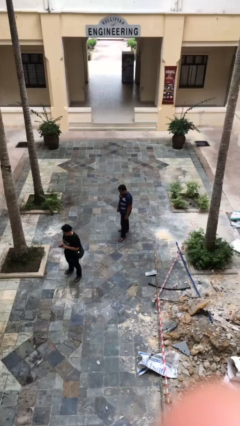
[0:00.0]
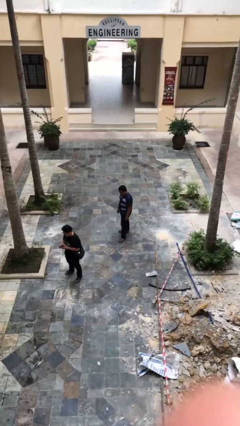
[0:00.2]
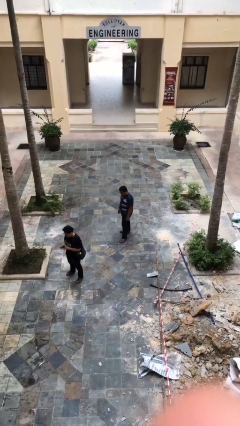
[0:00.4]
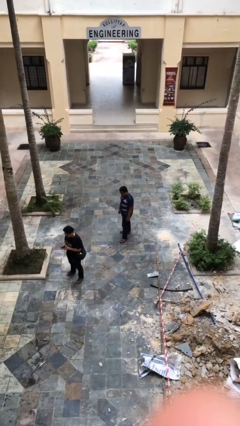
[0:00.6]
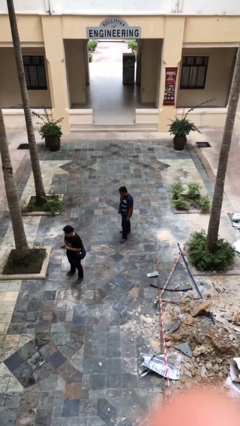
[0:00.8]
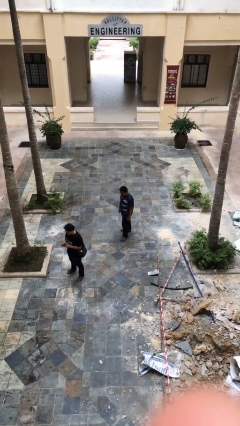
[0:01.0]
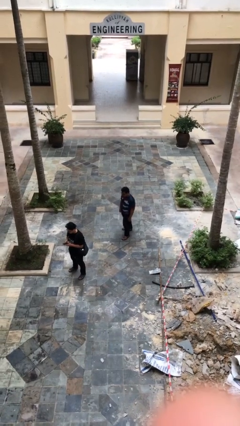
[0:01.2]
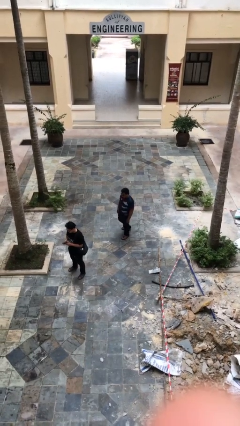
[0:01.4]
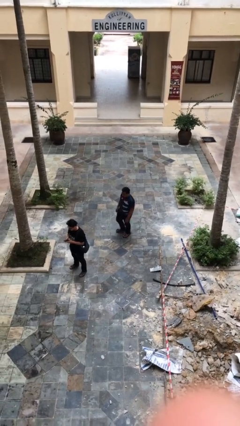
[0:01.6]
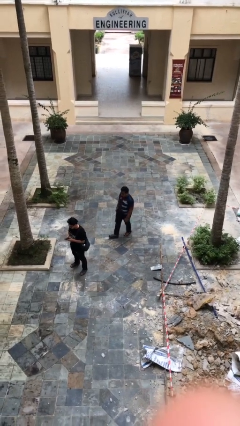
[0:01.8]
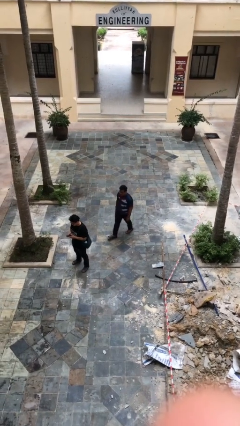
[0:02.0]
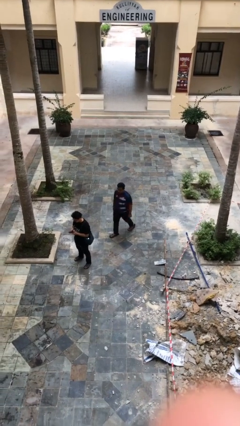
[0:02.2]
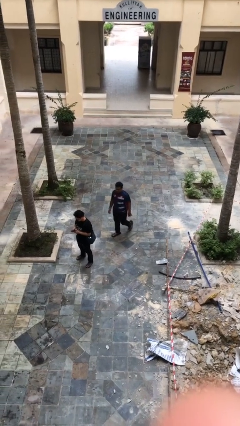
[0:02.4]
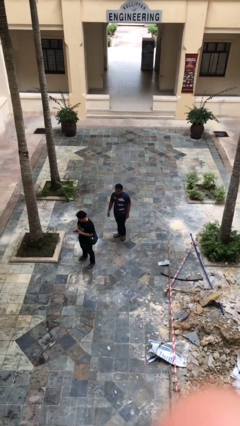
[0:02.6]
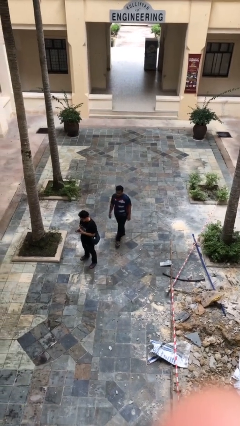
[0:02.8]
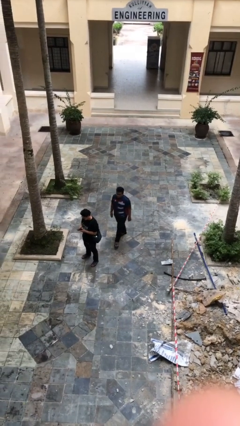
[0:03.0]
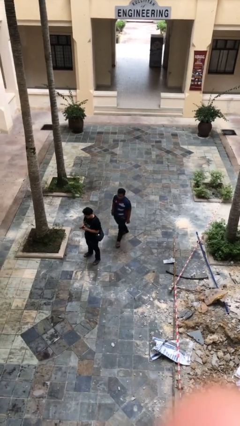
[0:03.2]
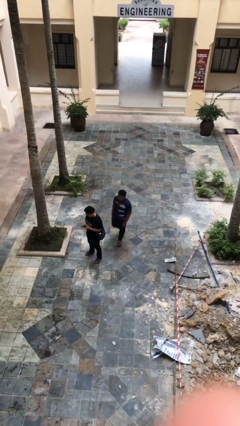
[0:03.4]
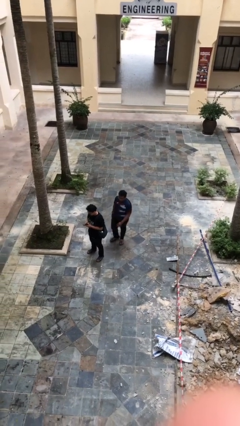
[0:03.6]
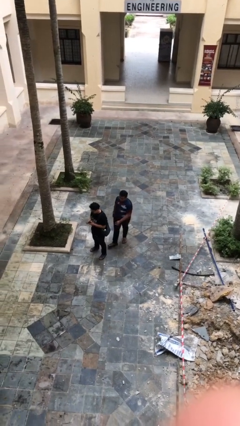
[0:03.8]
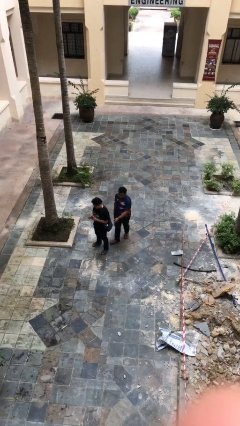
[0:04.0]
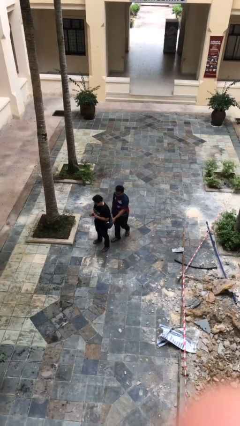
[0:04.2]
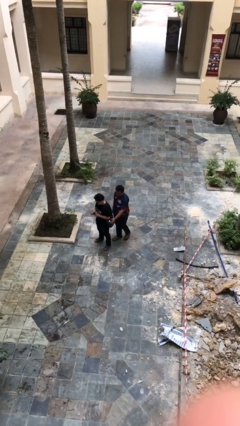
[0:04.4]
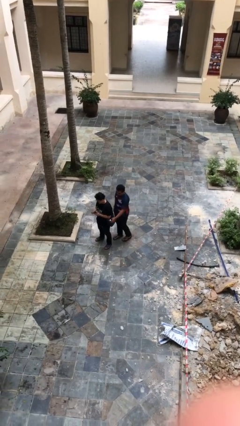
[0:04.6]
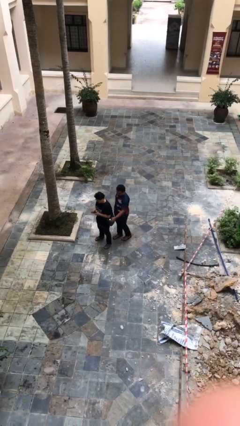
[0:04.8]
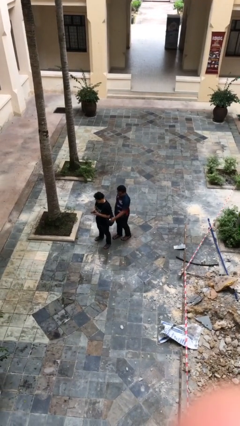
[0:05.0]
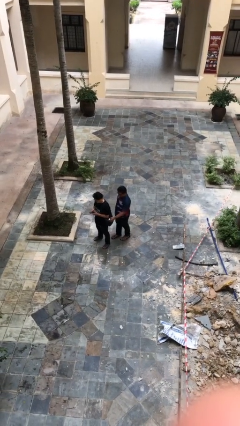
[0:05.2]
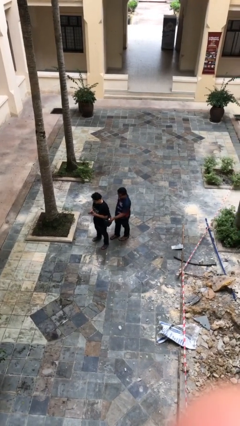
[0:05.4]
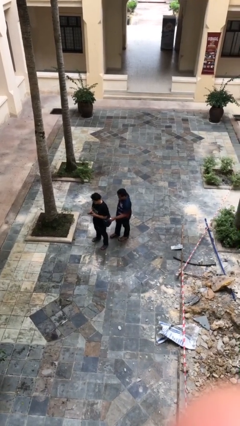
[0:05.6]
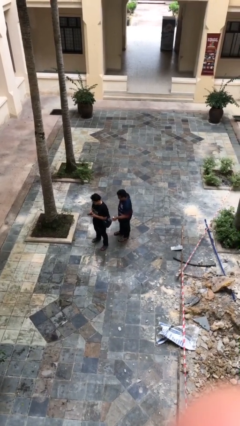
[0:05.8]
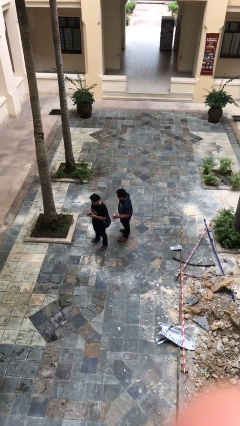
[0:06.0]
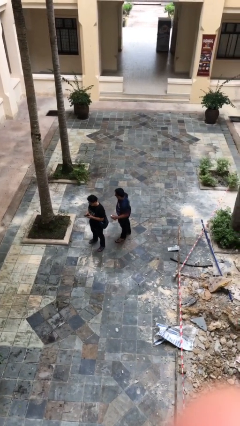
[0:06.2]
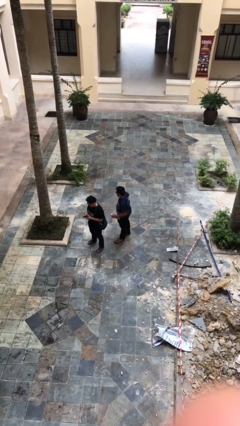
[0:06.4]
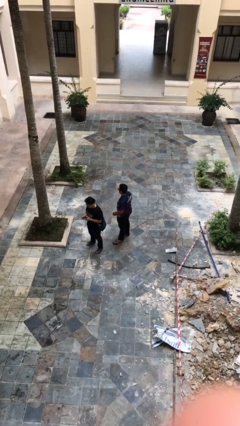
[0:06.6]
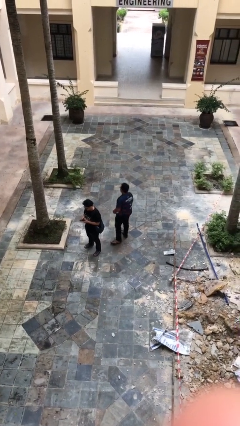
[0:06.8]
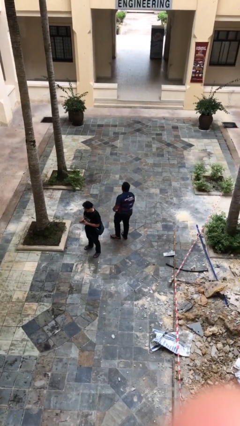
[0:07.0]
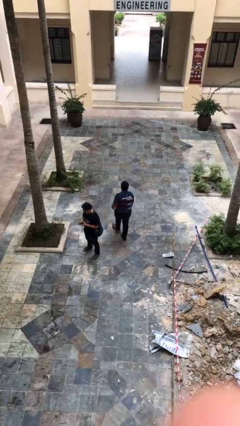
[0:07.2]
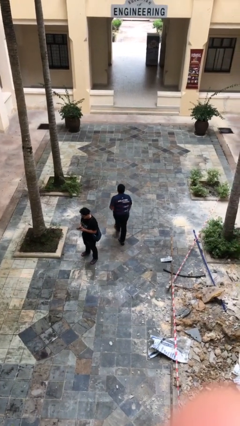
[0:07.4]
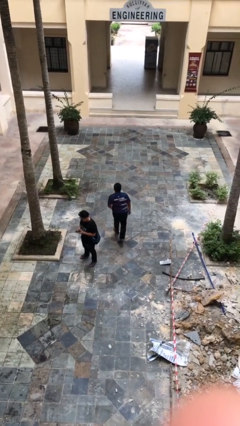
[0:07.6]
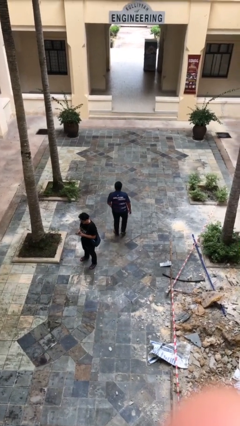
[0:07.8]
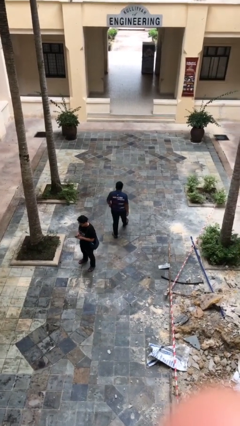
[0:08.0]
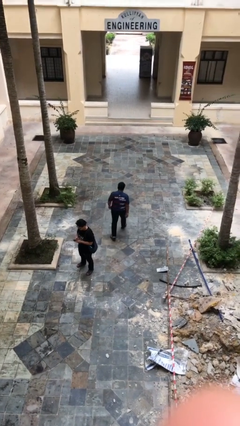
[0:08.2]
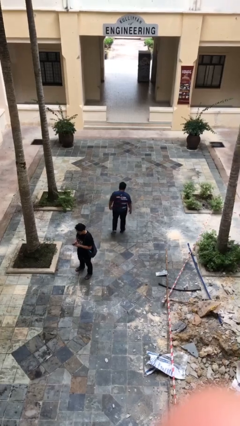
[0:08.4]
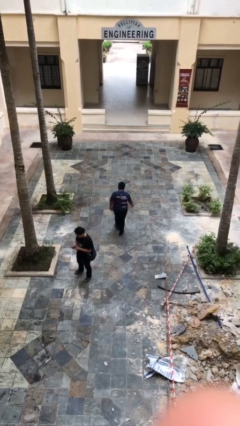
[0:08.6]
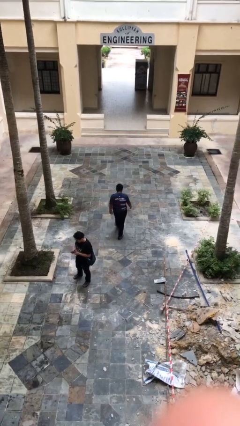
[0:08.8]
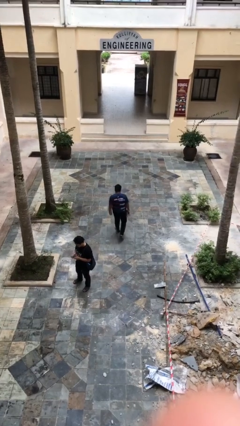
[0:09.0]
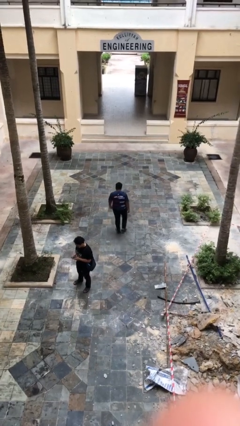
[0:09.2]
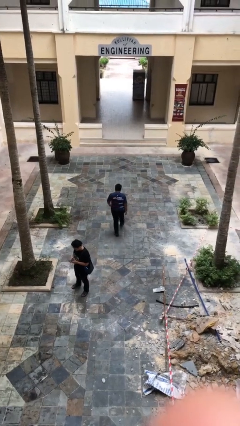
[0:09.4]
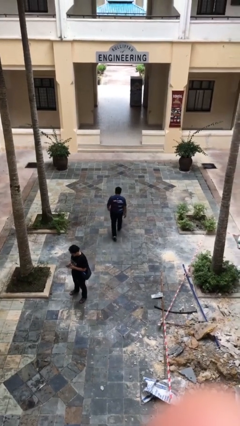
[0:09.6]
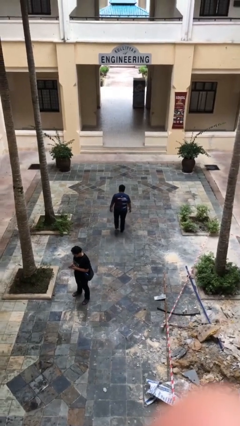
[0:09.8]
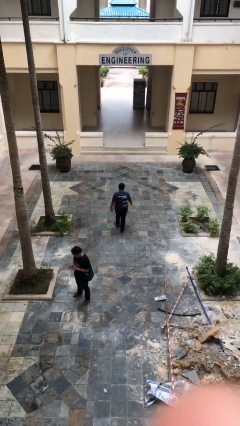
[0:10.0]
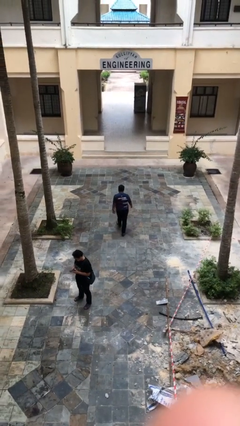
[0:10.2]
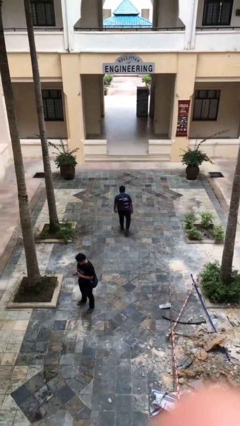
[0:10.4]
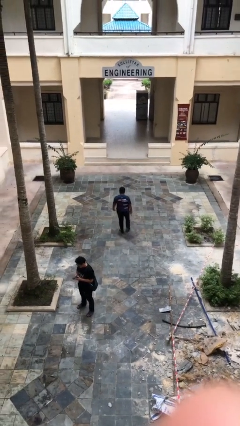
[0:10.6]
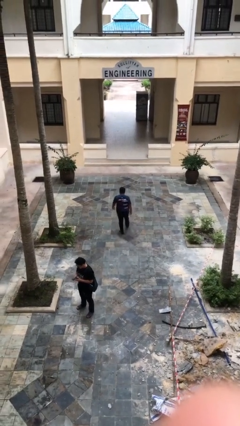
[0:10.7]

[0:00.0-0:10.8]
person steals object from person

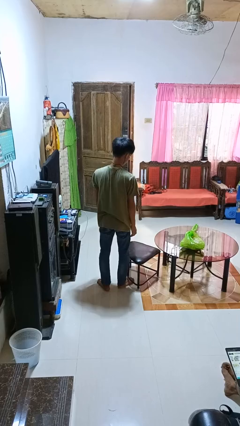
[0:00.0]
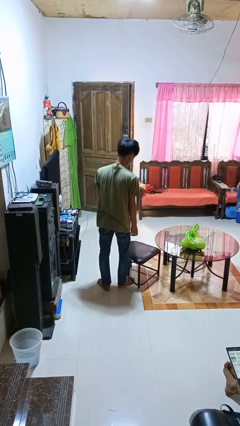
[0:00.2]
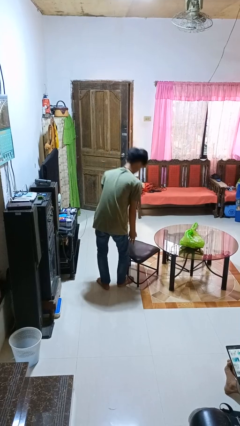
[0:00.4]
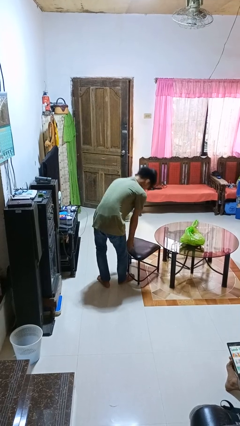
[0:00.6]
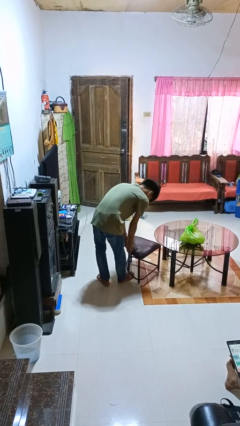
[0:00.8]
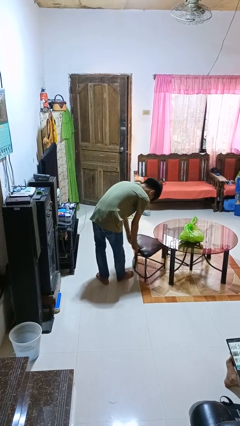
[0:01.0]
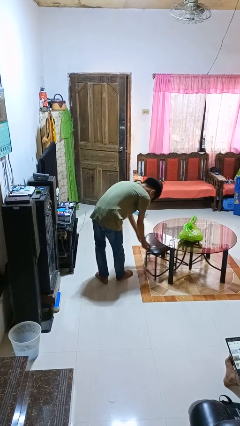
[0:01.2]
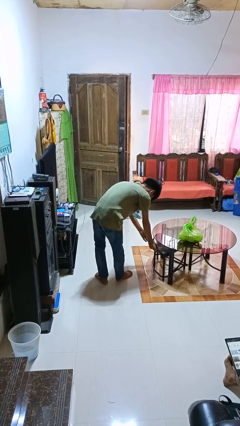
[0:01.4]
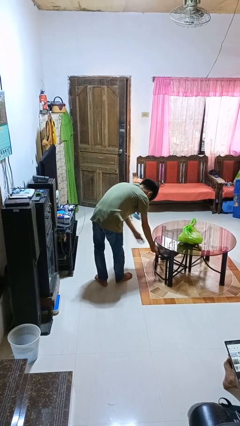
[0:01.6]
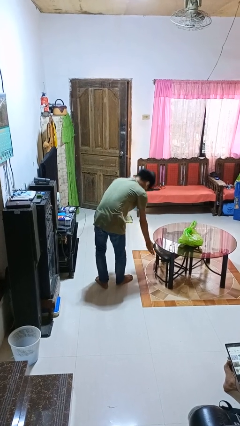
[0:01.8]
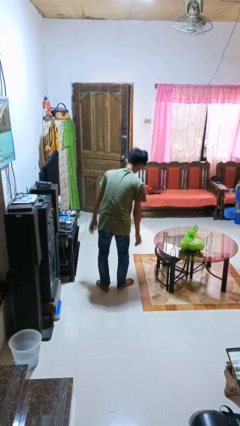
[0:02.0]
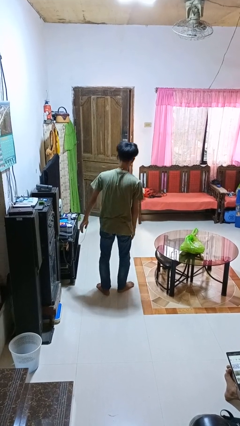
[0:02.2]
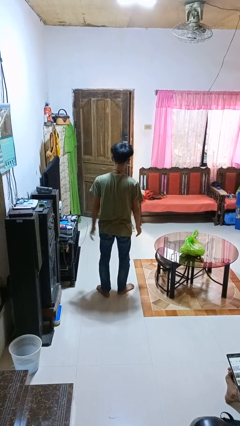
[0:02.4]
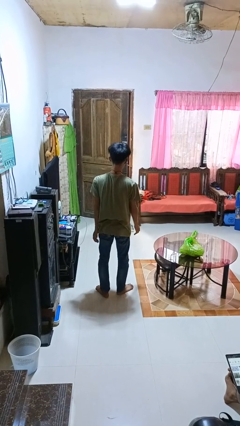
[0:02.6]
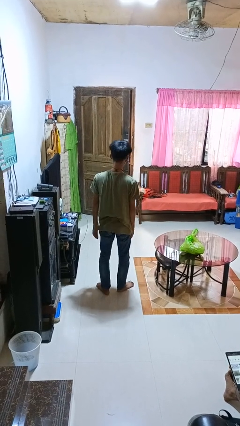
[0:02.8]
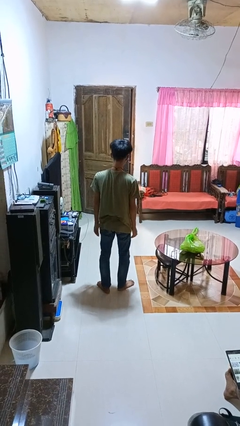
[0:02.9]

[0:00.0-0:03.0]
person pushes in chair

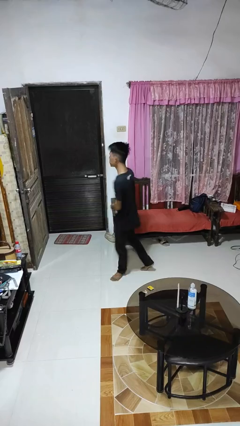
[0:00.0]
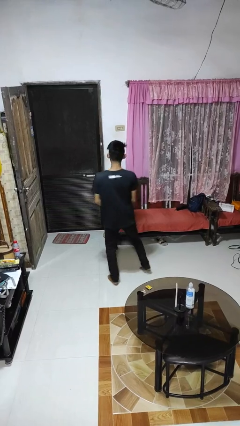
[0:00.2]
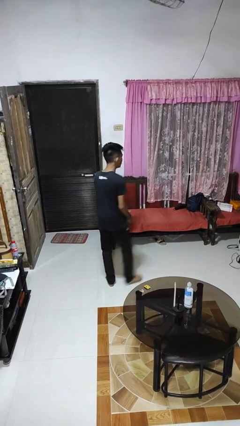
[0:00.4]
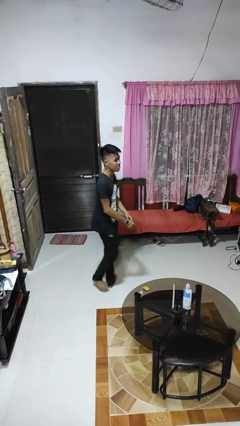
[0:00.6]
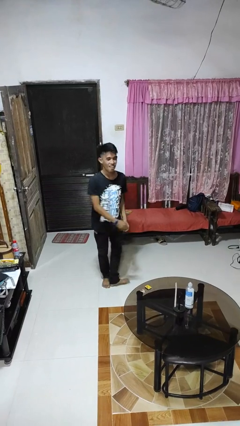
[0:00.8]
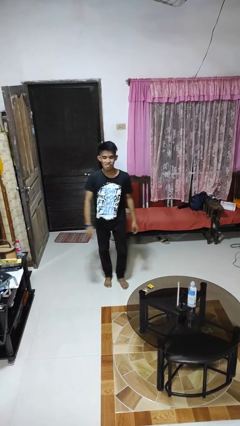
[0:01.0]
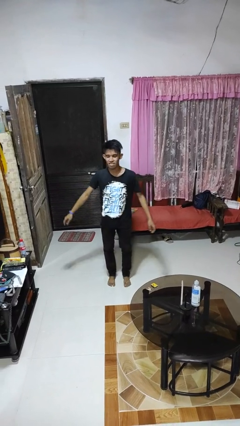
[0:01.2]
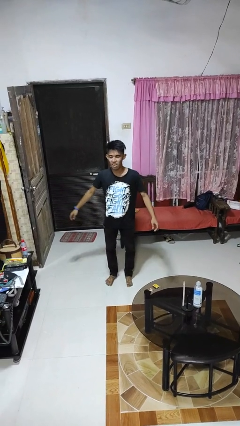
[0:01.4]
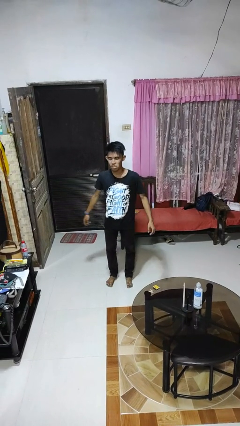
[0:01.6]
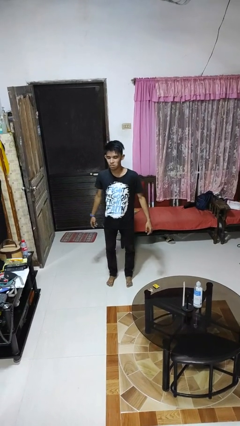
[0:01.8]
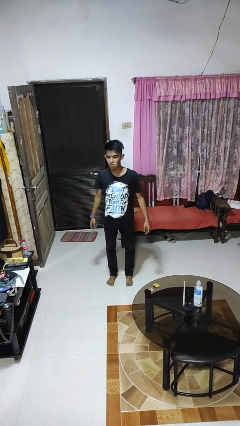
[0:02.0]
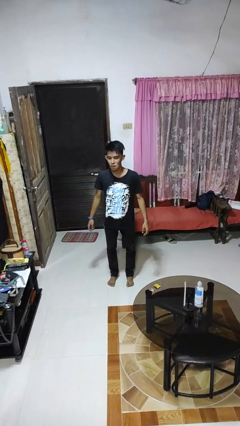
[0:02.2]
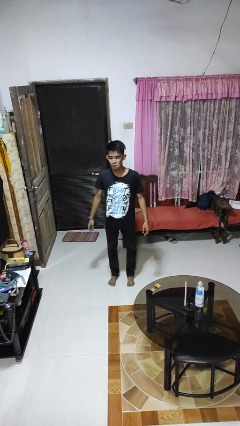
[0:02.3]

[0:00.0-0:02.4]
person twirls

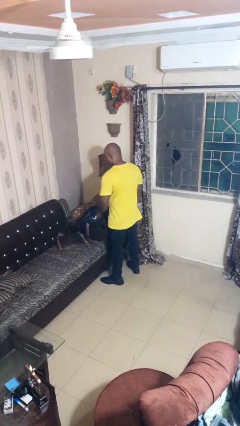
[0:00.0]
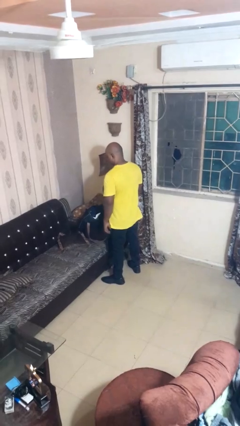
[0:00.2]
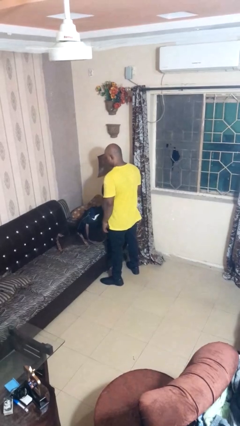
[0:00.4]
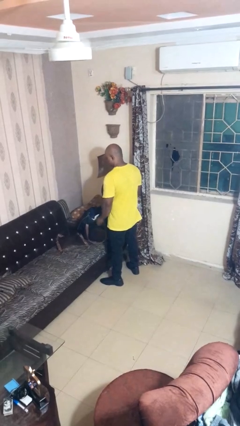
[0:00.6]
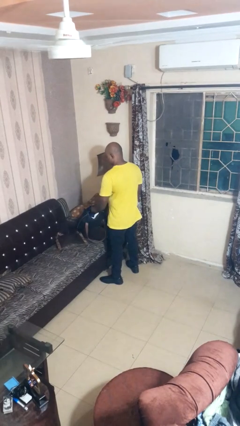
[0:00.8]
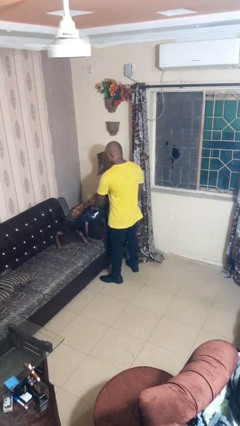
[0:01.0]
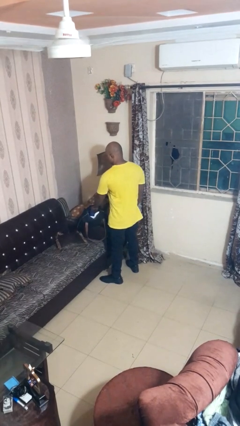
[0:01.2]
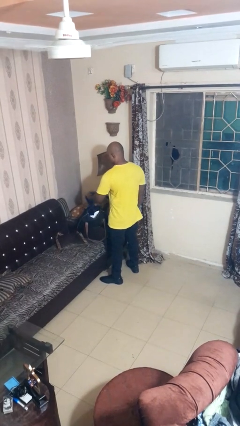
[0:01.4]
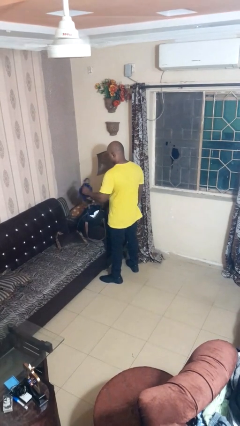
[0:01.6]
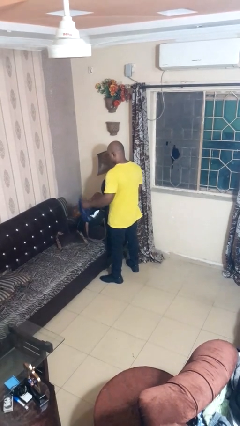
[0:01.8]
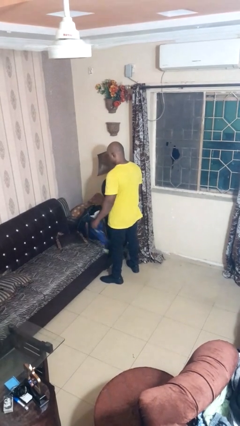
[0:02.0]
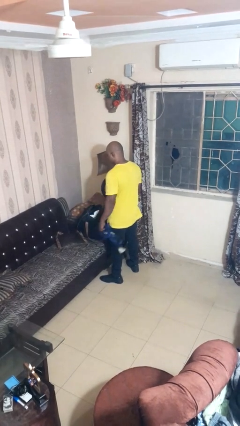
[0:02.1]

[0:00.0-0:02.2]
person takes object from bag
